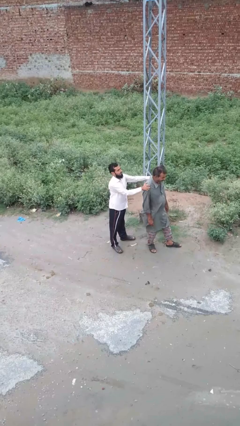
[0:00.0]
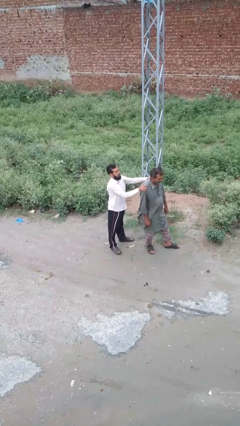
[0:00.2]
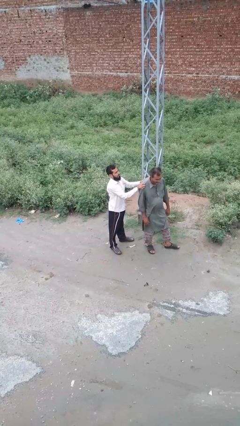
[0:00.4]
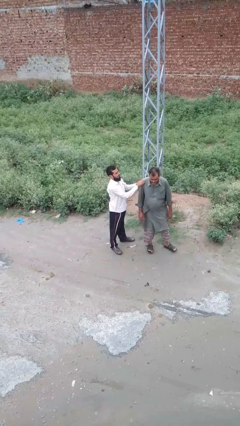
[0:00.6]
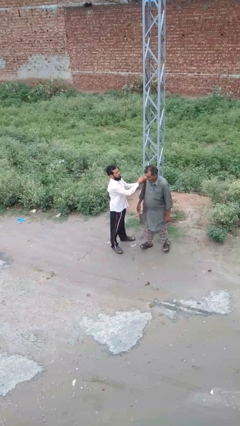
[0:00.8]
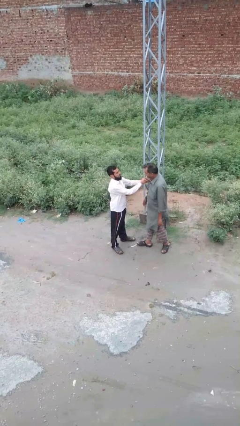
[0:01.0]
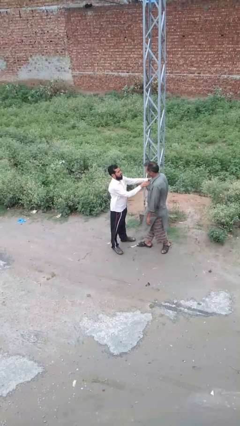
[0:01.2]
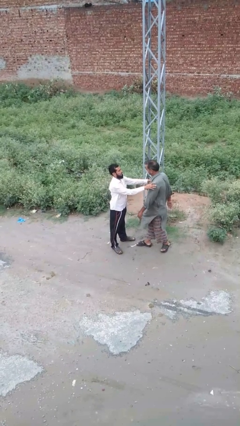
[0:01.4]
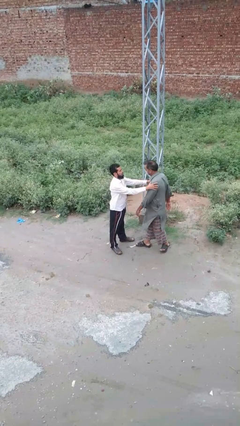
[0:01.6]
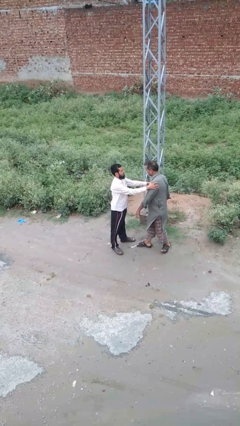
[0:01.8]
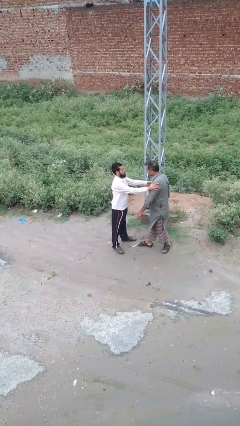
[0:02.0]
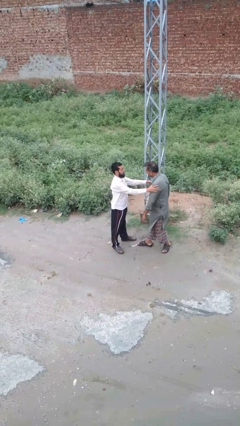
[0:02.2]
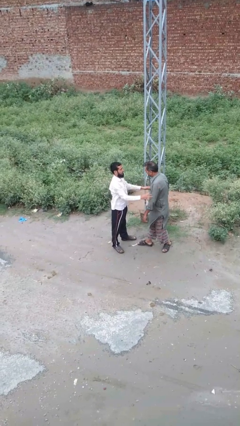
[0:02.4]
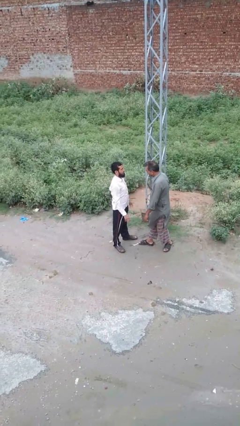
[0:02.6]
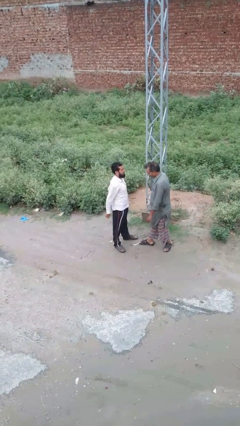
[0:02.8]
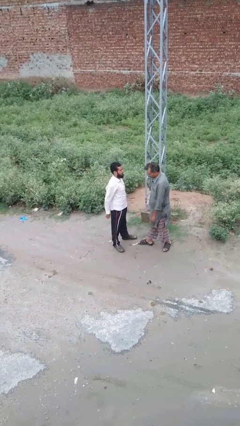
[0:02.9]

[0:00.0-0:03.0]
person spins person around

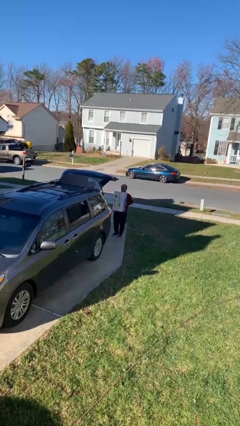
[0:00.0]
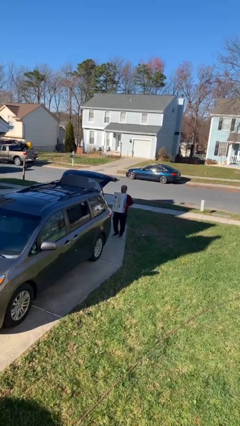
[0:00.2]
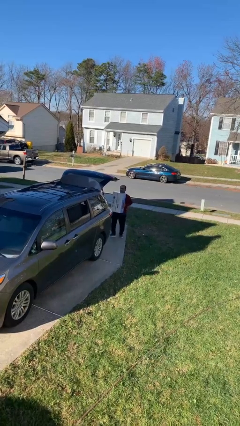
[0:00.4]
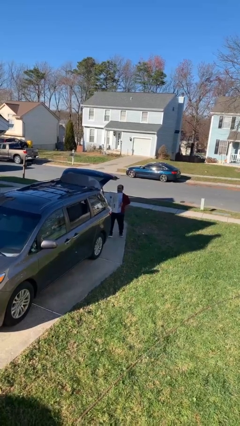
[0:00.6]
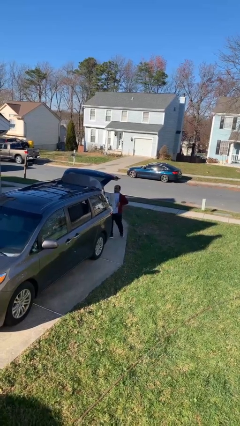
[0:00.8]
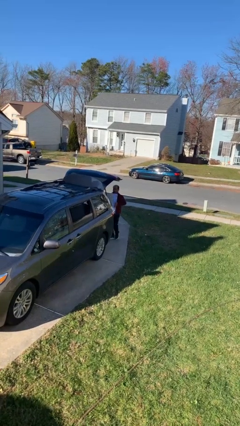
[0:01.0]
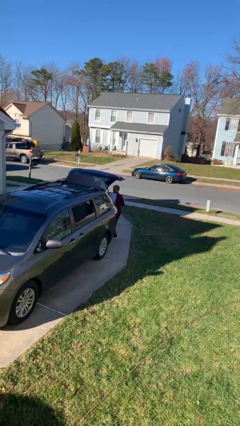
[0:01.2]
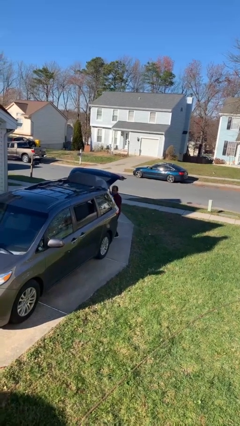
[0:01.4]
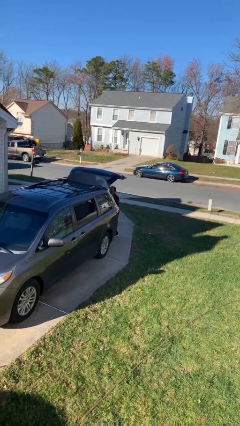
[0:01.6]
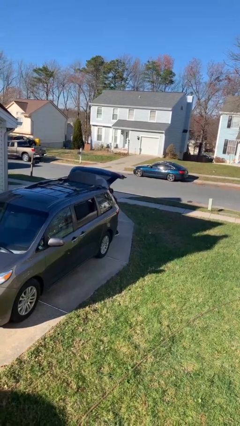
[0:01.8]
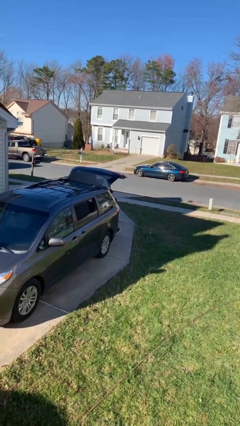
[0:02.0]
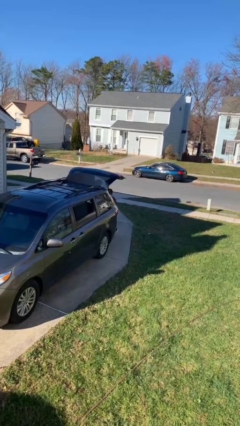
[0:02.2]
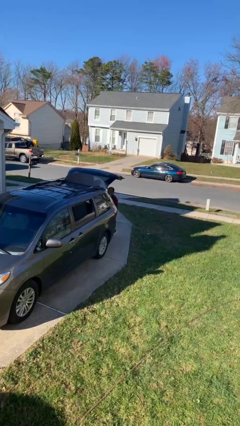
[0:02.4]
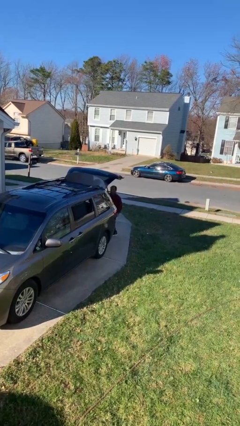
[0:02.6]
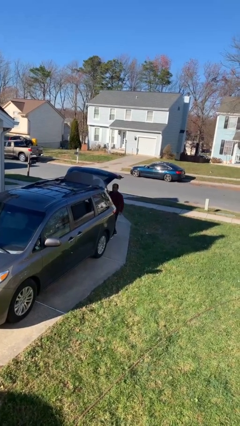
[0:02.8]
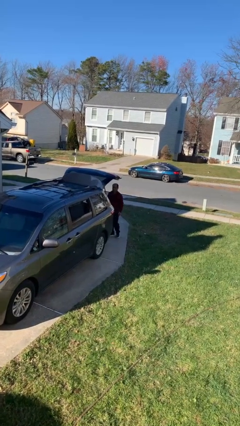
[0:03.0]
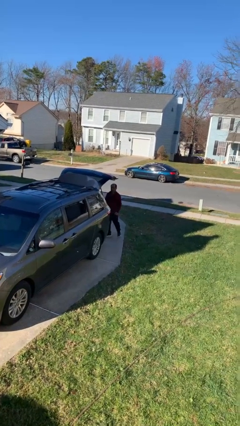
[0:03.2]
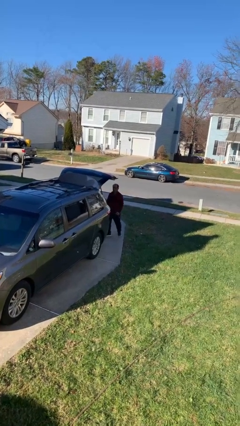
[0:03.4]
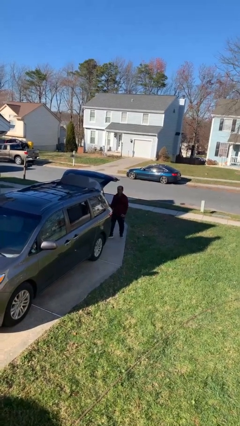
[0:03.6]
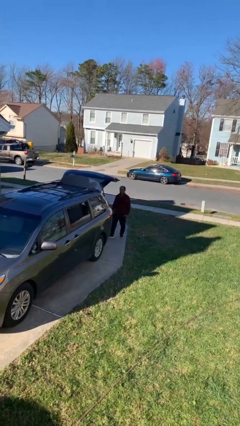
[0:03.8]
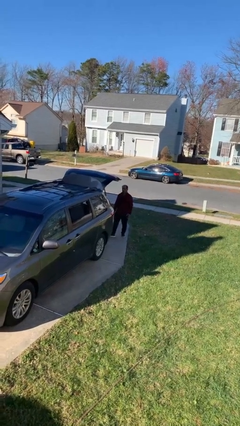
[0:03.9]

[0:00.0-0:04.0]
person loads car

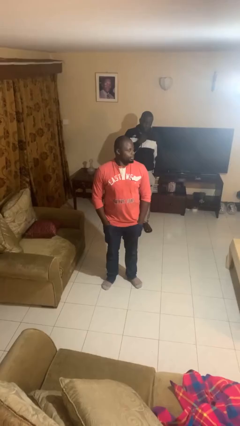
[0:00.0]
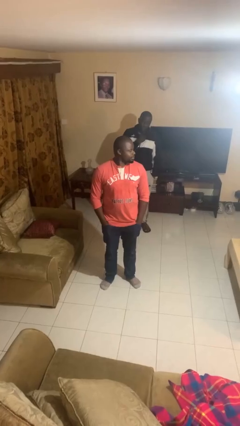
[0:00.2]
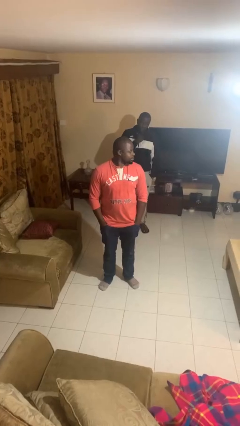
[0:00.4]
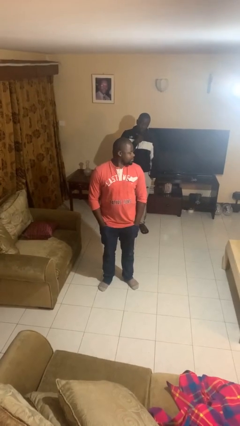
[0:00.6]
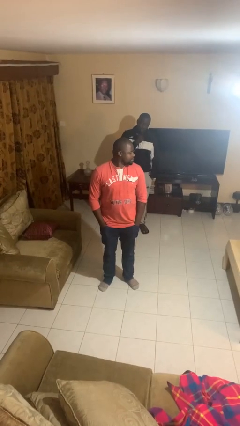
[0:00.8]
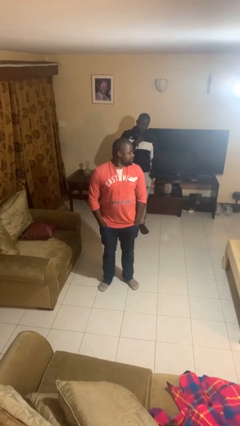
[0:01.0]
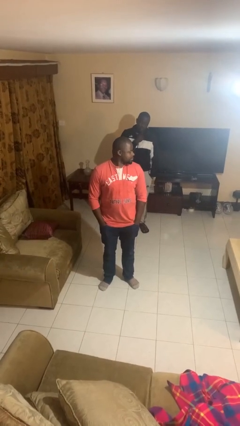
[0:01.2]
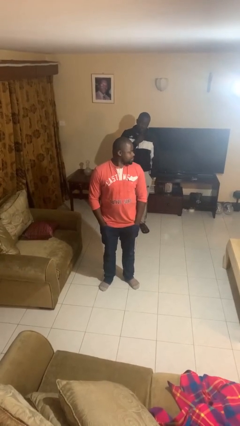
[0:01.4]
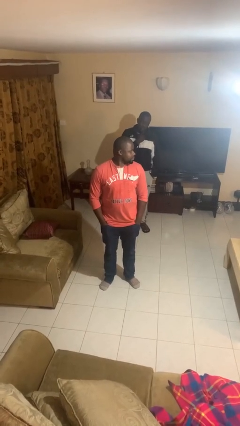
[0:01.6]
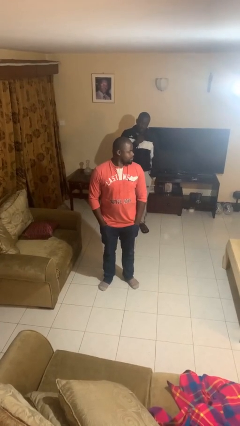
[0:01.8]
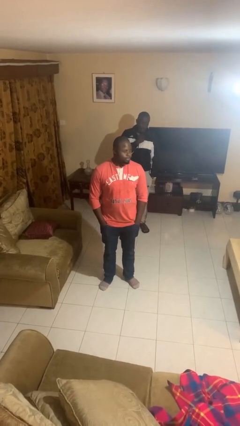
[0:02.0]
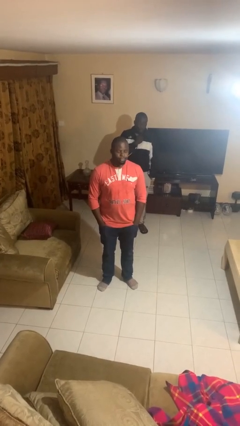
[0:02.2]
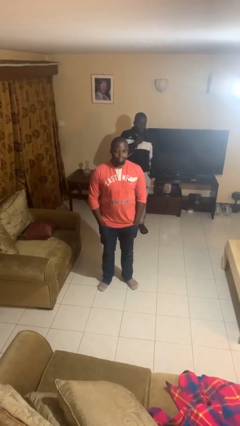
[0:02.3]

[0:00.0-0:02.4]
person looks over shoulder

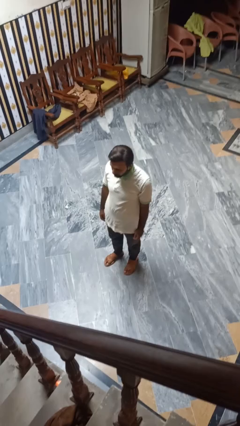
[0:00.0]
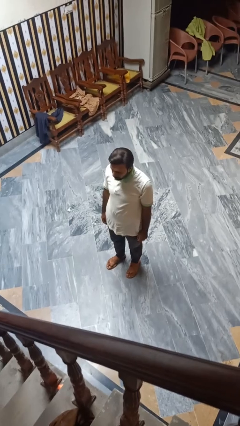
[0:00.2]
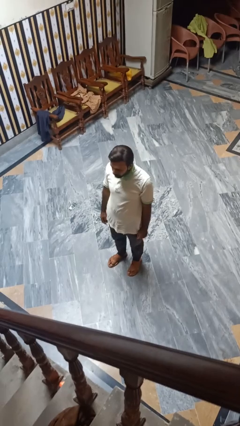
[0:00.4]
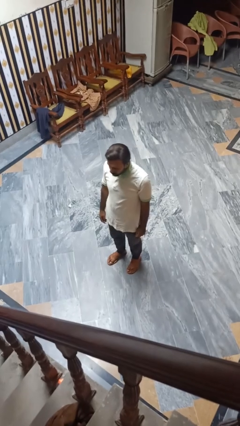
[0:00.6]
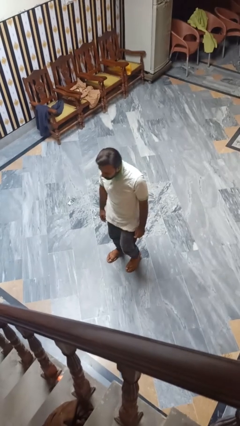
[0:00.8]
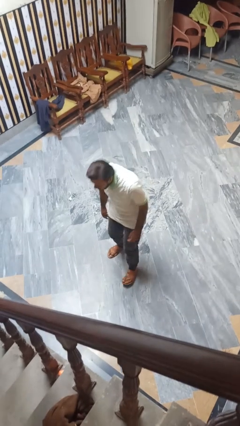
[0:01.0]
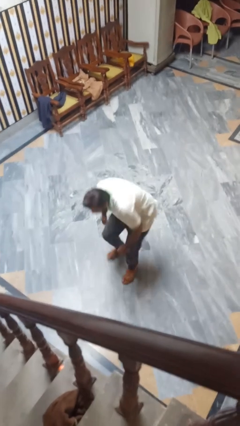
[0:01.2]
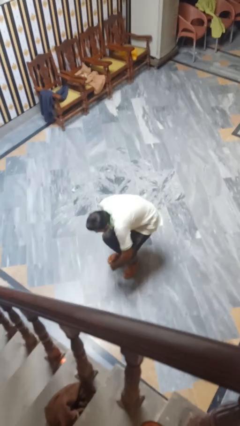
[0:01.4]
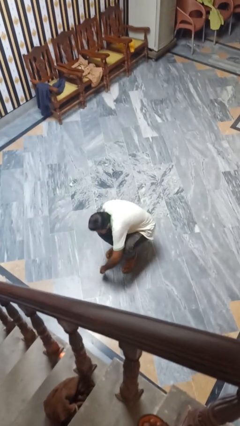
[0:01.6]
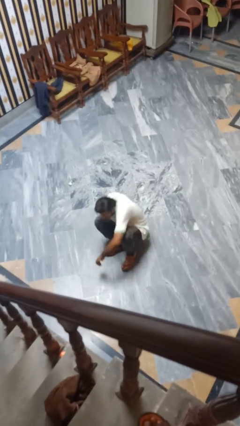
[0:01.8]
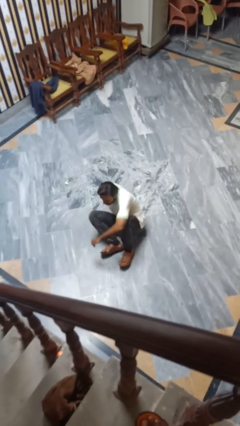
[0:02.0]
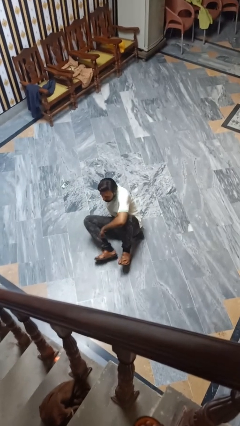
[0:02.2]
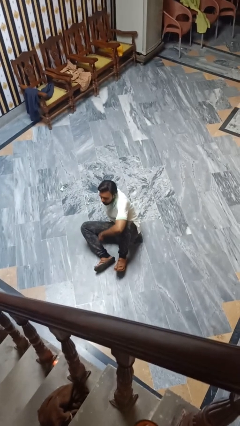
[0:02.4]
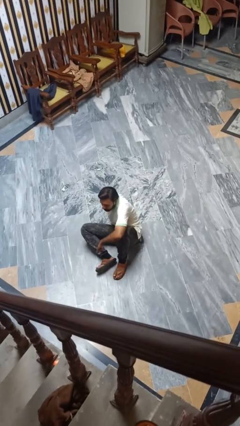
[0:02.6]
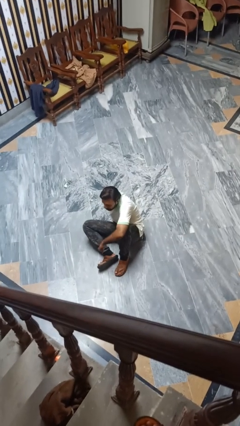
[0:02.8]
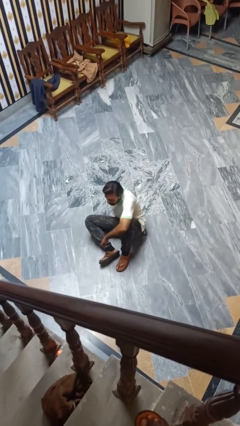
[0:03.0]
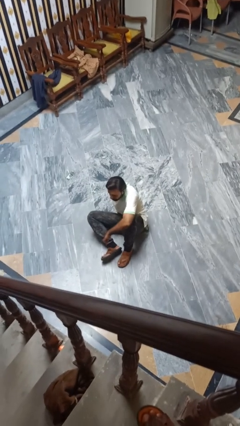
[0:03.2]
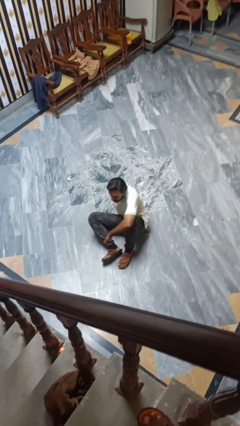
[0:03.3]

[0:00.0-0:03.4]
person falls while standing

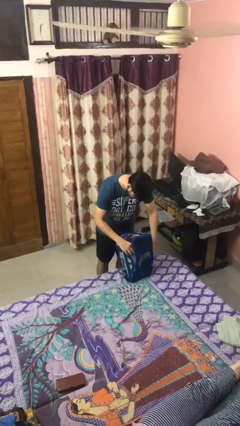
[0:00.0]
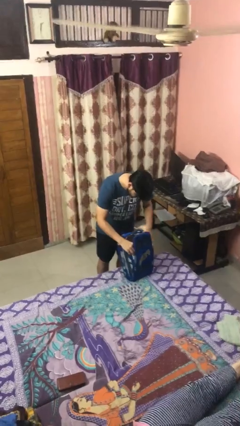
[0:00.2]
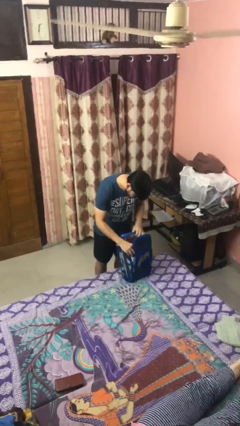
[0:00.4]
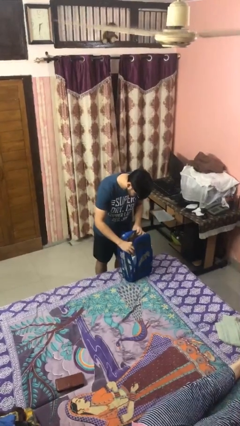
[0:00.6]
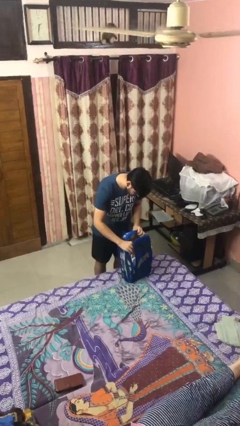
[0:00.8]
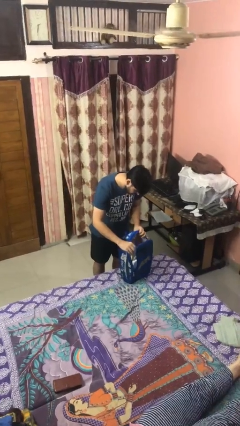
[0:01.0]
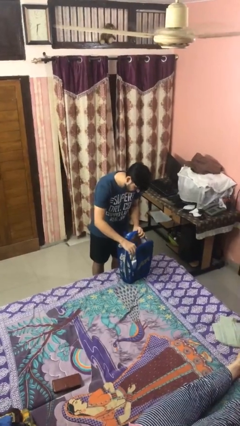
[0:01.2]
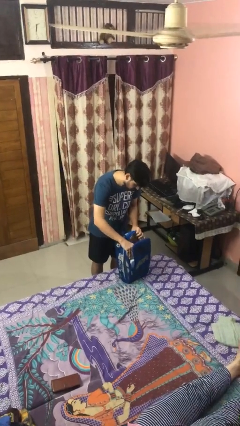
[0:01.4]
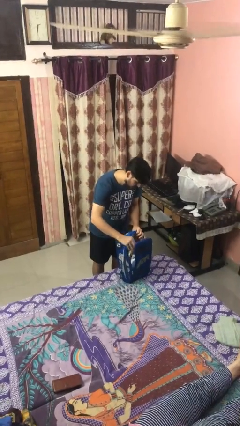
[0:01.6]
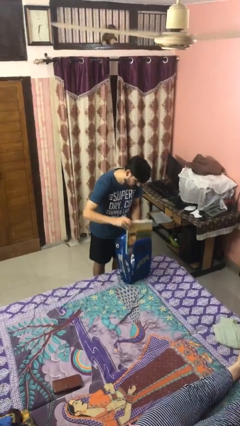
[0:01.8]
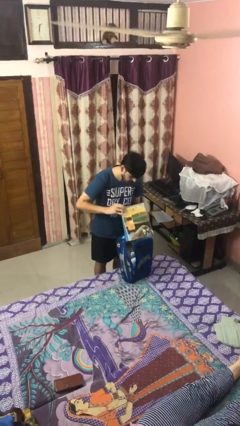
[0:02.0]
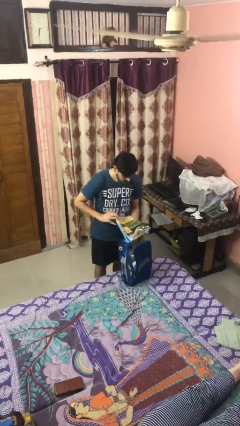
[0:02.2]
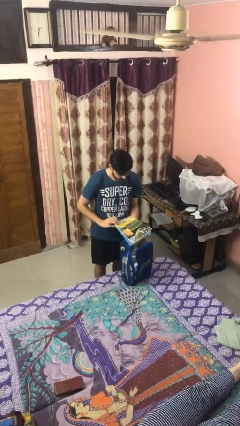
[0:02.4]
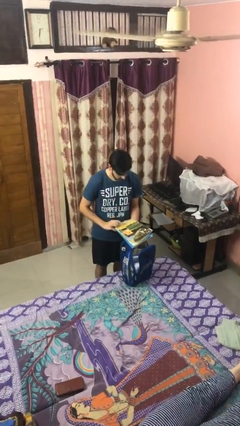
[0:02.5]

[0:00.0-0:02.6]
person takes object from purse

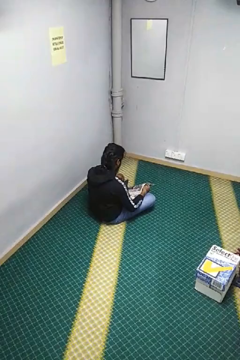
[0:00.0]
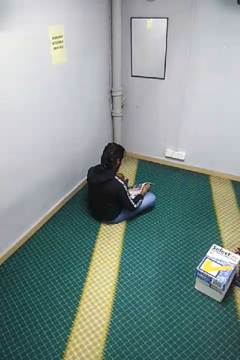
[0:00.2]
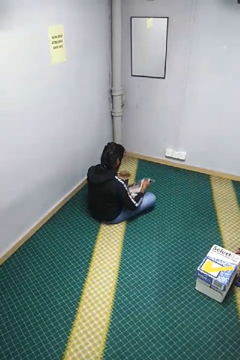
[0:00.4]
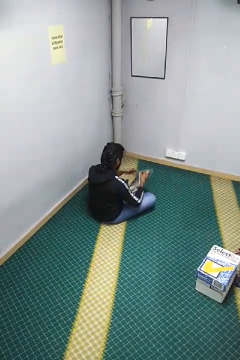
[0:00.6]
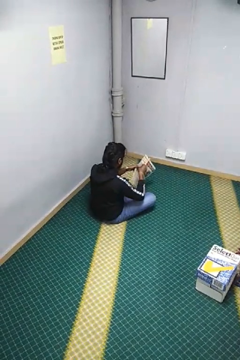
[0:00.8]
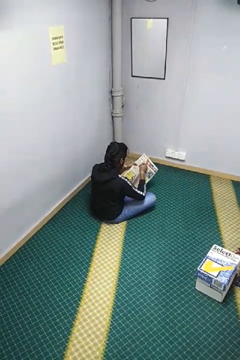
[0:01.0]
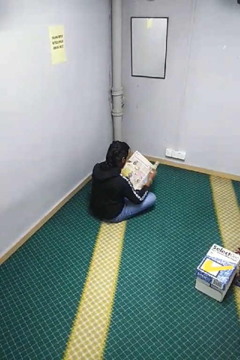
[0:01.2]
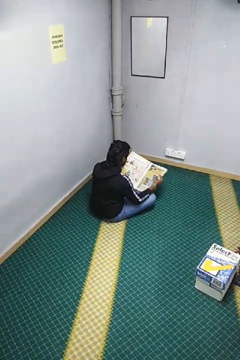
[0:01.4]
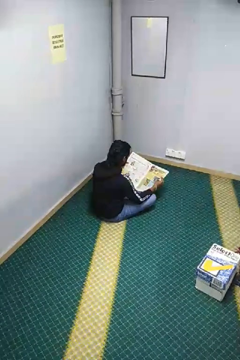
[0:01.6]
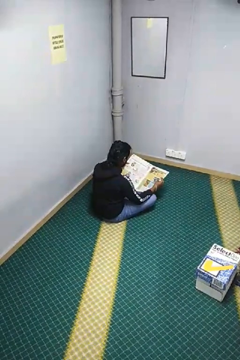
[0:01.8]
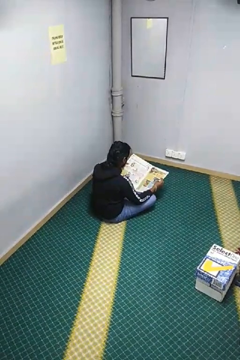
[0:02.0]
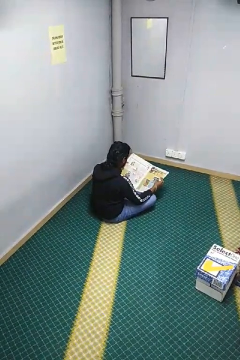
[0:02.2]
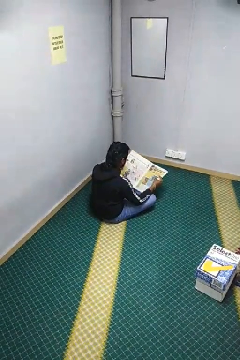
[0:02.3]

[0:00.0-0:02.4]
person reads newspaper
